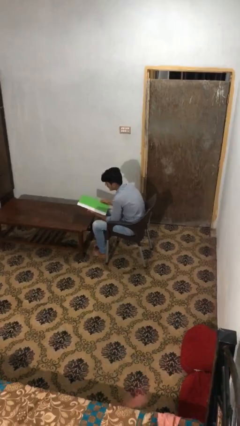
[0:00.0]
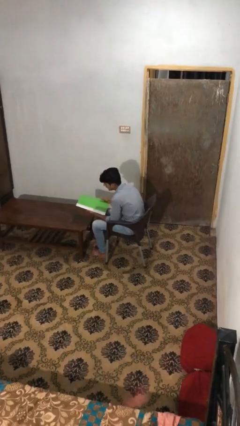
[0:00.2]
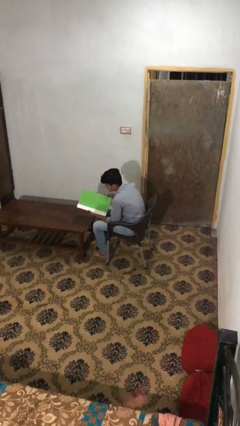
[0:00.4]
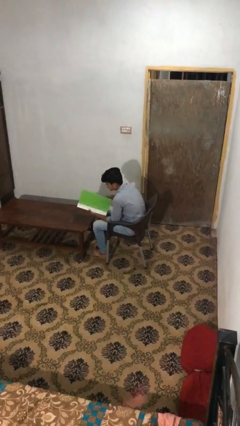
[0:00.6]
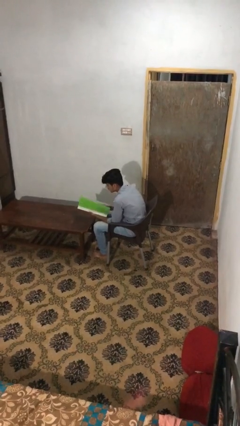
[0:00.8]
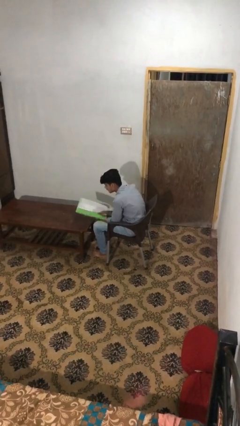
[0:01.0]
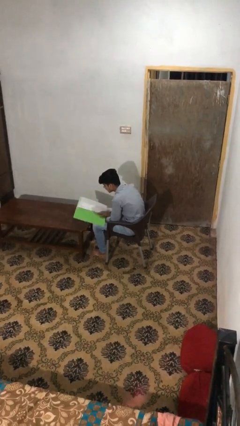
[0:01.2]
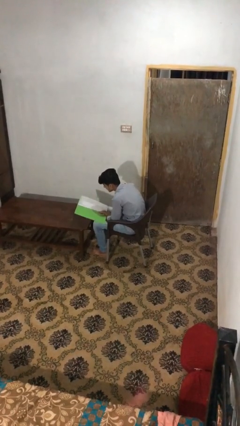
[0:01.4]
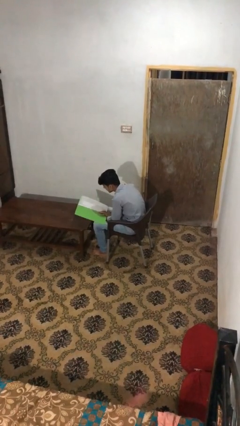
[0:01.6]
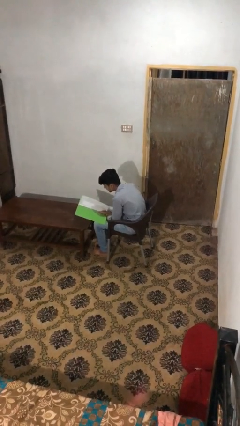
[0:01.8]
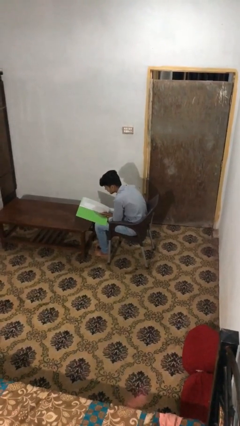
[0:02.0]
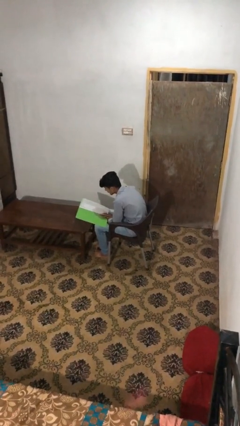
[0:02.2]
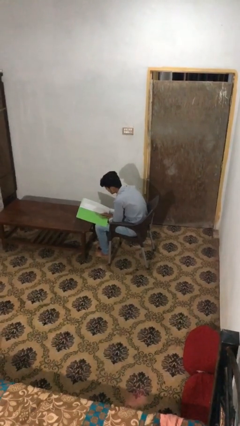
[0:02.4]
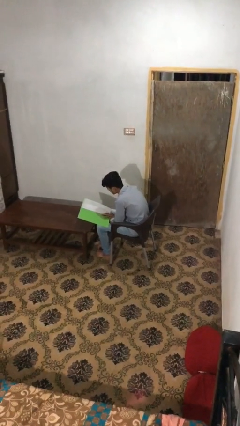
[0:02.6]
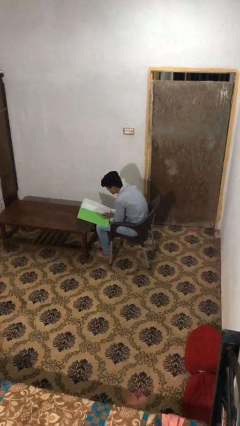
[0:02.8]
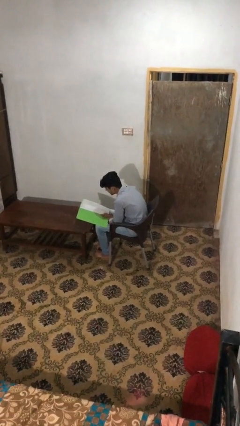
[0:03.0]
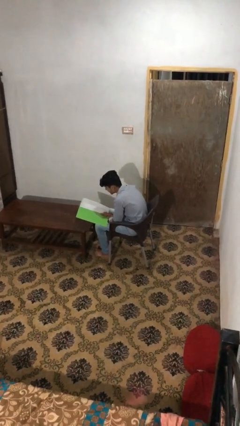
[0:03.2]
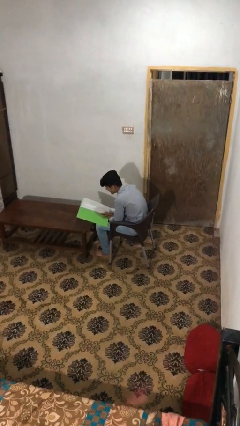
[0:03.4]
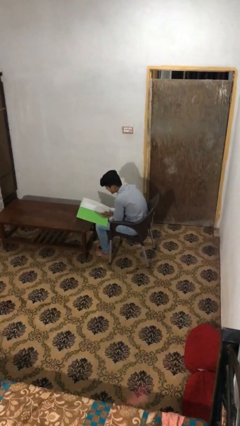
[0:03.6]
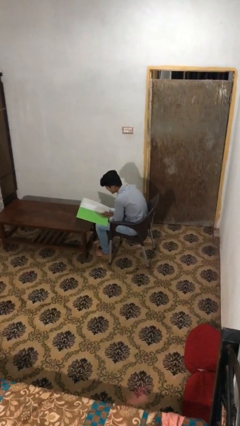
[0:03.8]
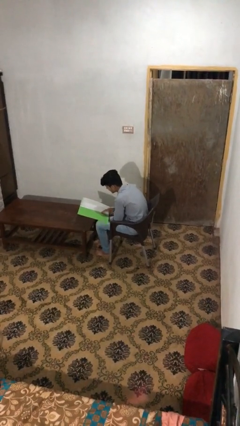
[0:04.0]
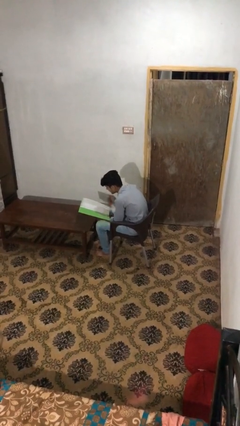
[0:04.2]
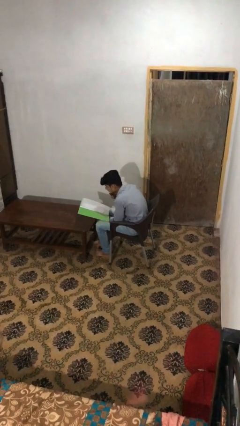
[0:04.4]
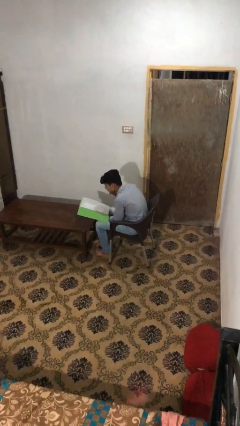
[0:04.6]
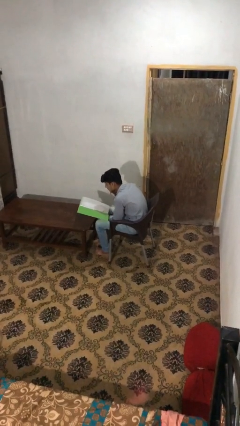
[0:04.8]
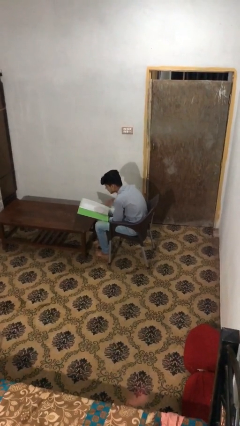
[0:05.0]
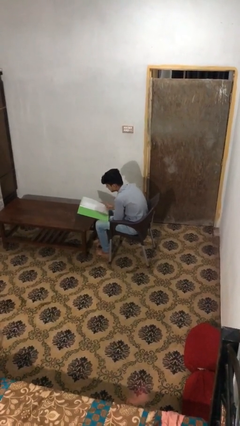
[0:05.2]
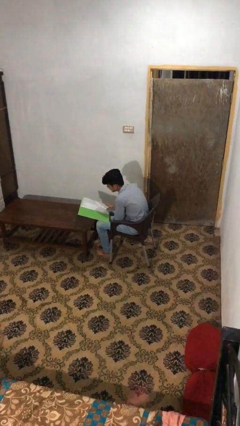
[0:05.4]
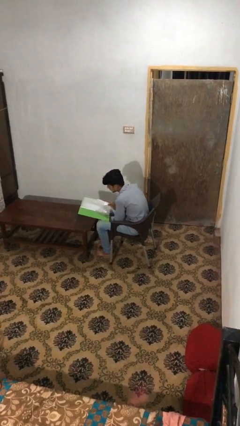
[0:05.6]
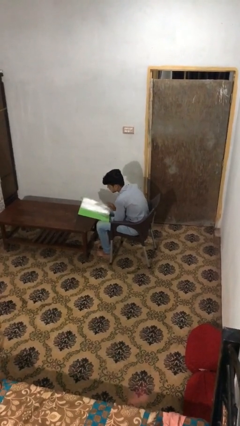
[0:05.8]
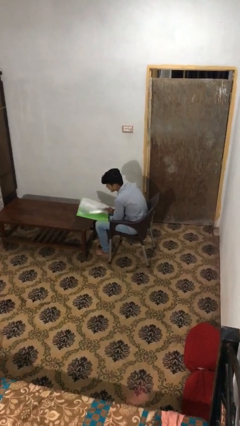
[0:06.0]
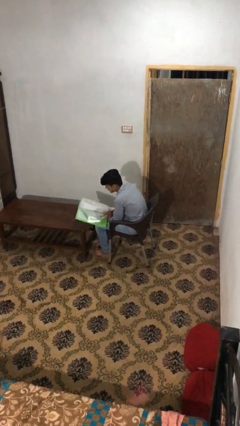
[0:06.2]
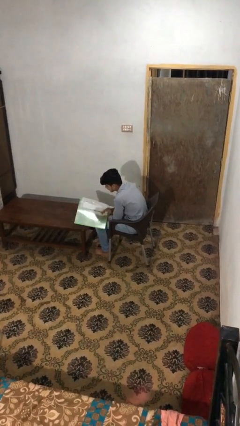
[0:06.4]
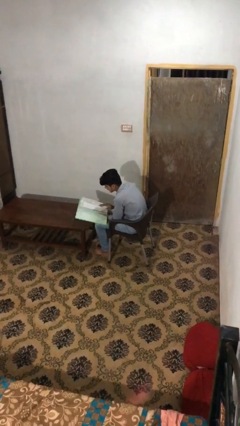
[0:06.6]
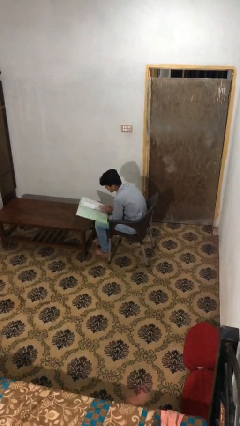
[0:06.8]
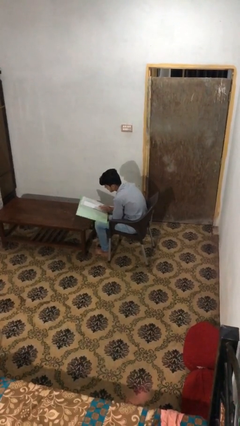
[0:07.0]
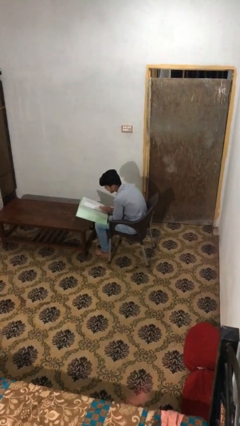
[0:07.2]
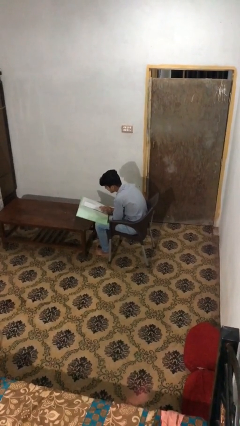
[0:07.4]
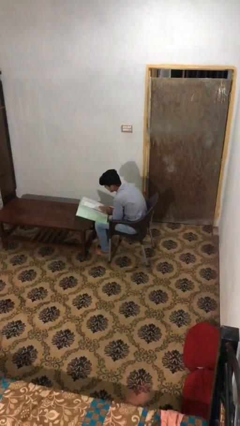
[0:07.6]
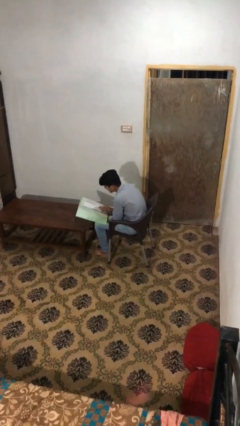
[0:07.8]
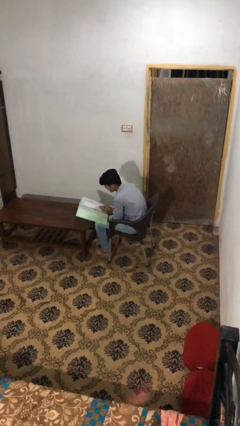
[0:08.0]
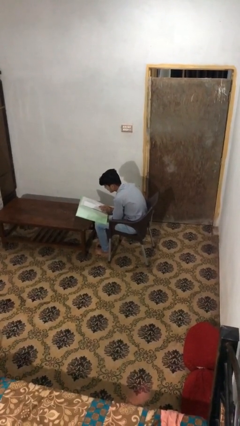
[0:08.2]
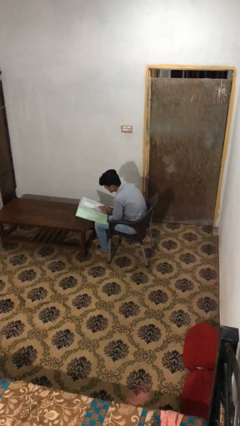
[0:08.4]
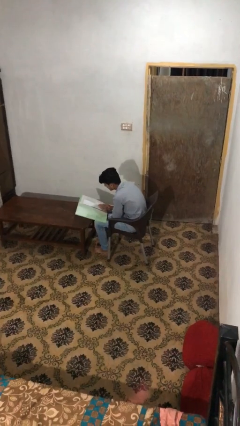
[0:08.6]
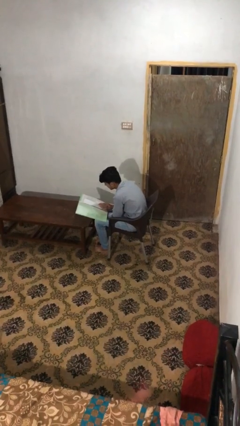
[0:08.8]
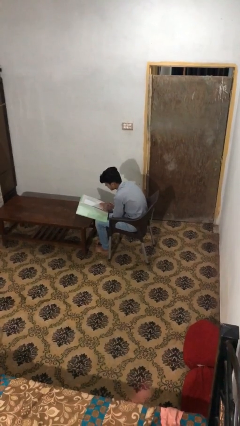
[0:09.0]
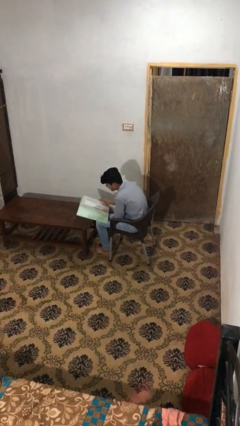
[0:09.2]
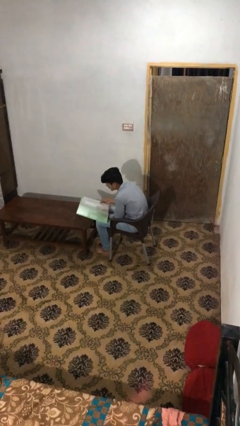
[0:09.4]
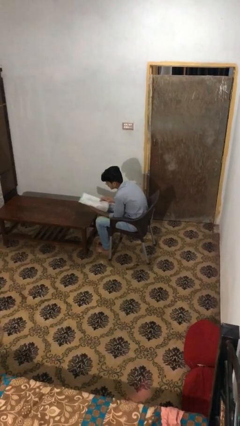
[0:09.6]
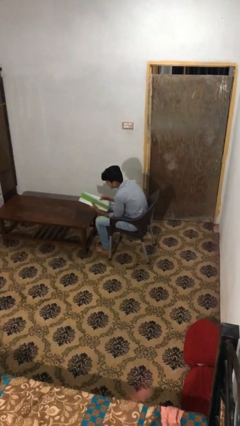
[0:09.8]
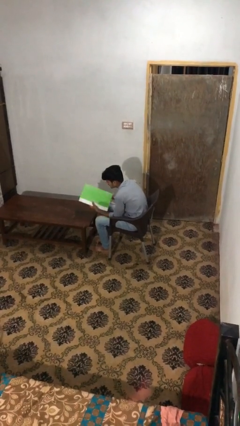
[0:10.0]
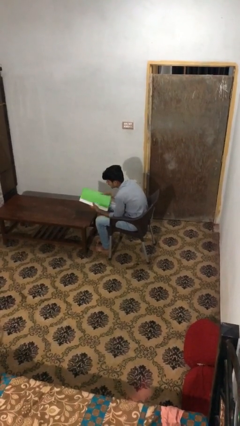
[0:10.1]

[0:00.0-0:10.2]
person reads document

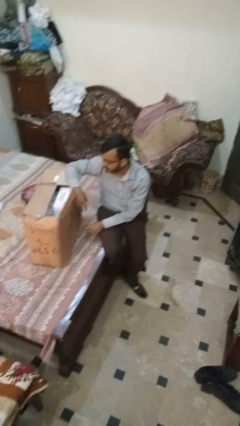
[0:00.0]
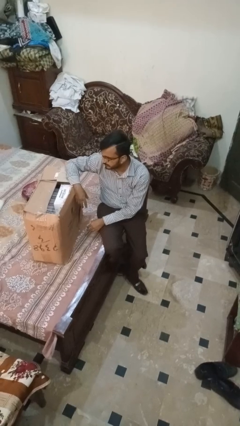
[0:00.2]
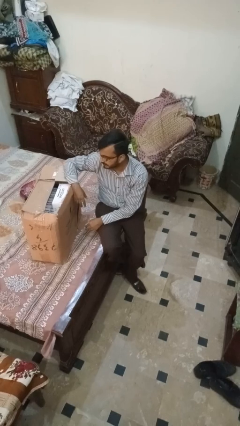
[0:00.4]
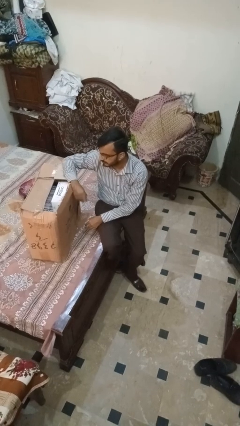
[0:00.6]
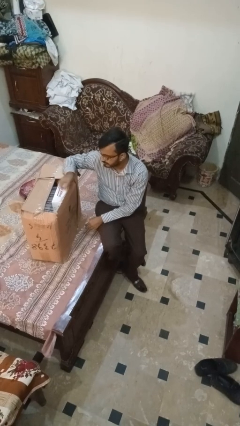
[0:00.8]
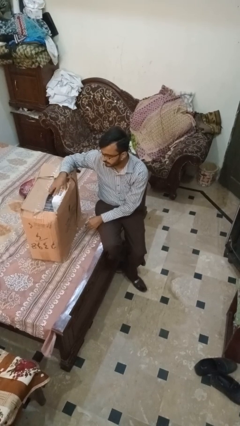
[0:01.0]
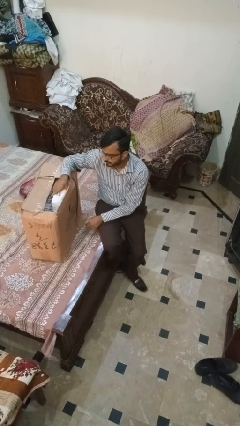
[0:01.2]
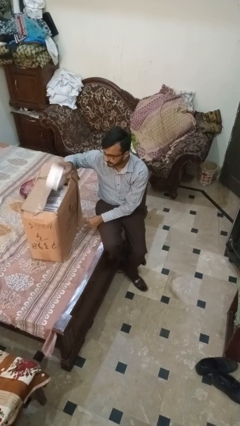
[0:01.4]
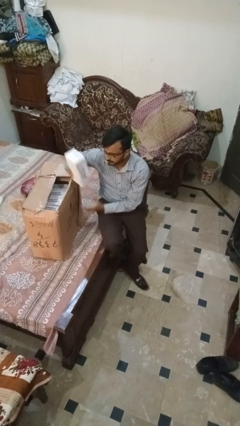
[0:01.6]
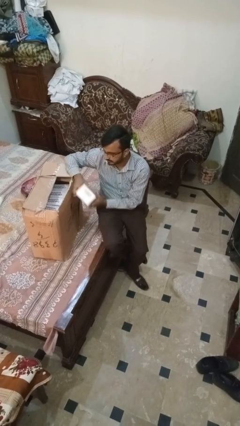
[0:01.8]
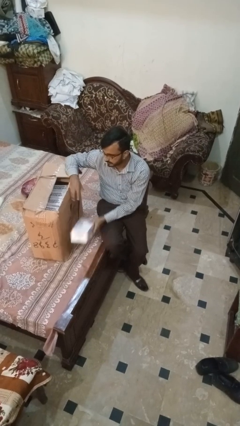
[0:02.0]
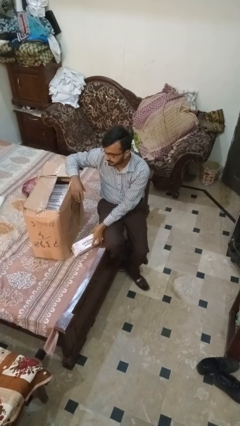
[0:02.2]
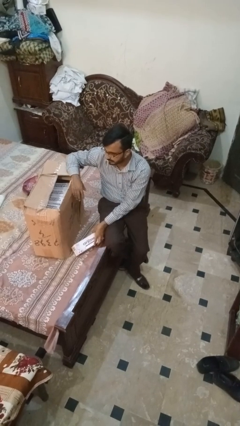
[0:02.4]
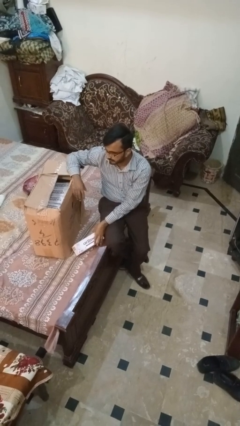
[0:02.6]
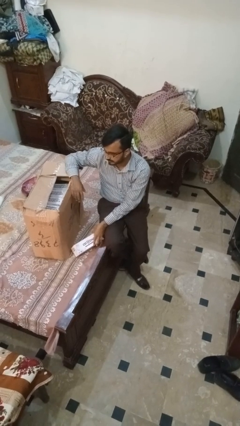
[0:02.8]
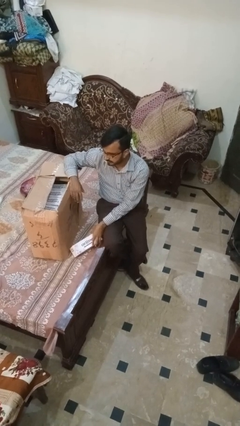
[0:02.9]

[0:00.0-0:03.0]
person takes object from box

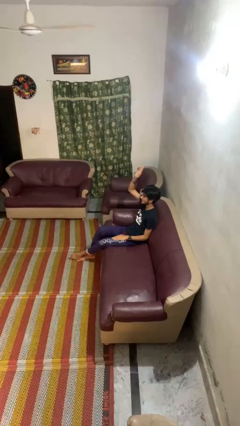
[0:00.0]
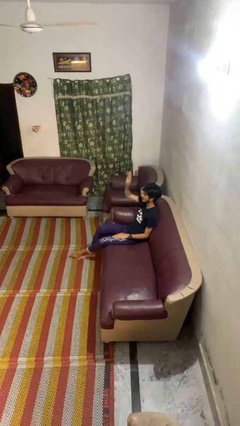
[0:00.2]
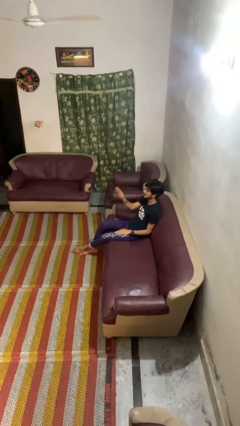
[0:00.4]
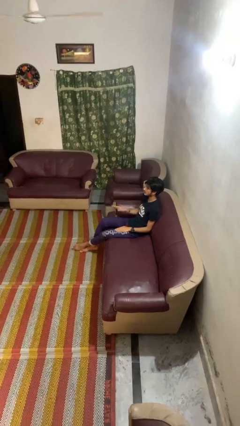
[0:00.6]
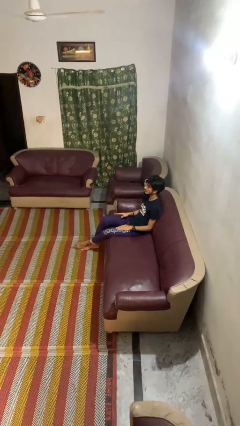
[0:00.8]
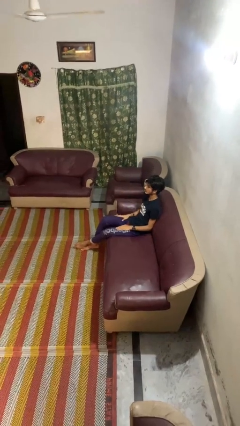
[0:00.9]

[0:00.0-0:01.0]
person gestures lower hand

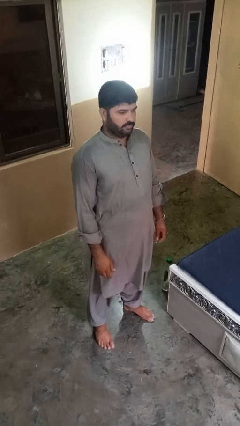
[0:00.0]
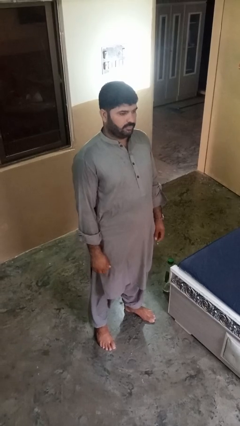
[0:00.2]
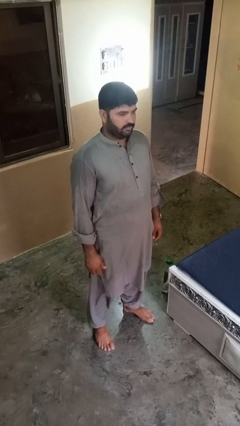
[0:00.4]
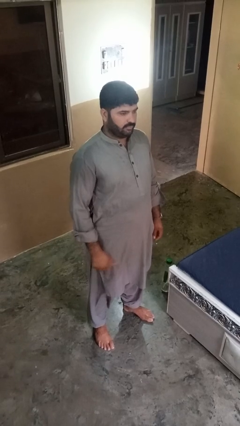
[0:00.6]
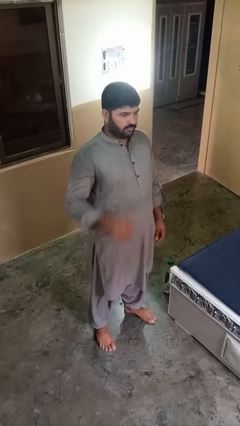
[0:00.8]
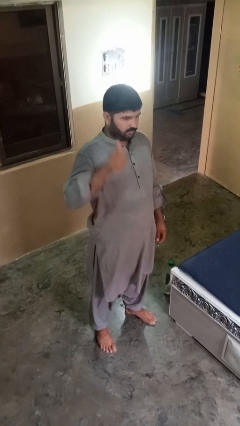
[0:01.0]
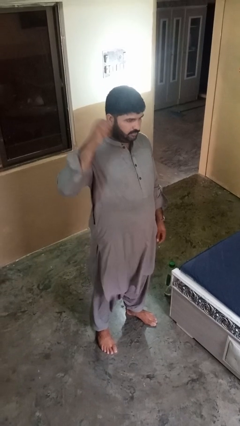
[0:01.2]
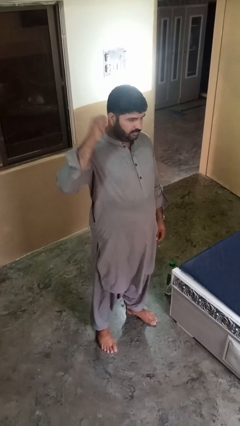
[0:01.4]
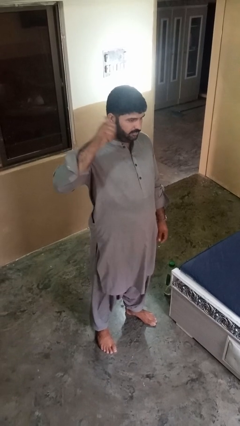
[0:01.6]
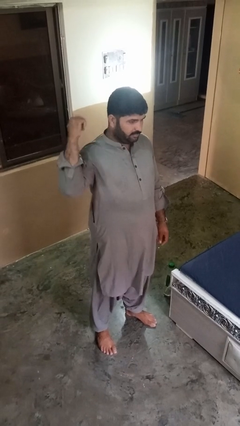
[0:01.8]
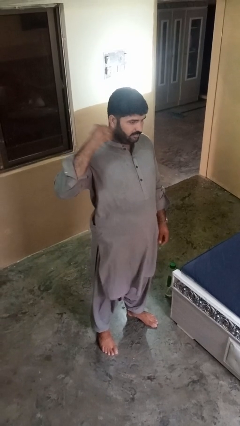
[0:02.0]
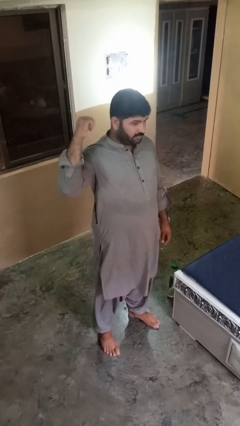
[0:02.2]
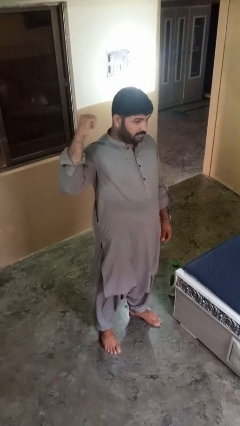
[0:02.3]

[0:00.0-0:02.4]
person gestures behind me

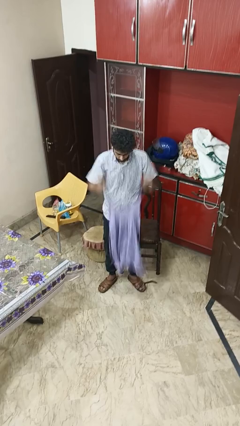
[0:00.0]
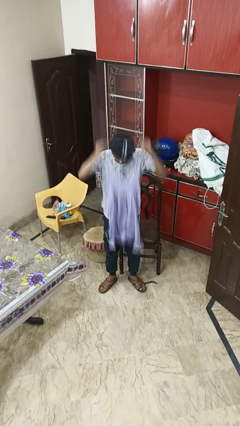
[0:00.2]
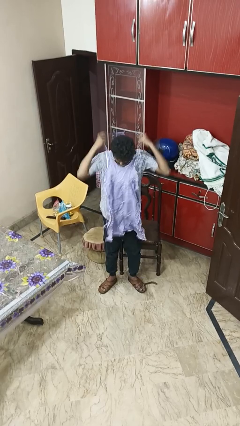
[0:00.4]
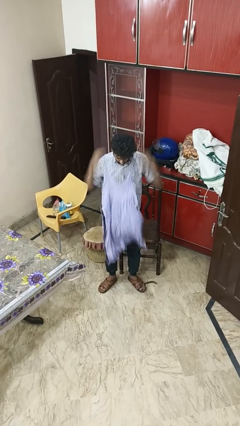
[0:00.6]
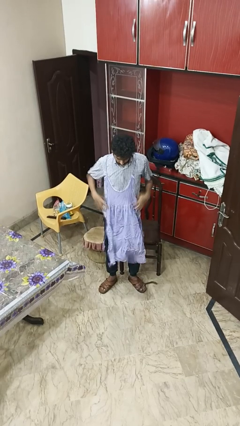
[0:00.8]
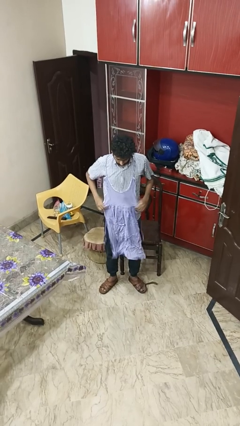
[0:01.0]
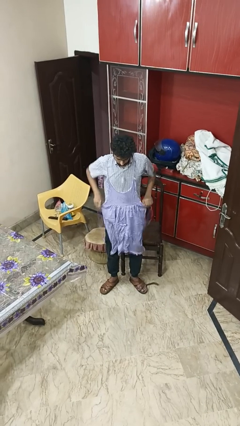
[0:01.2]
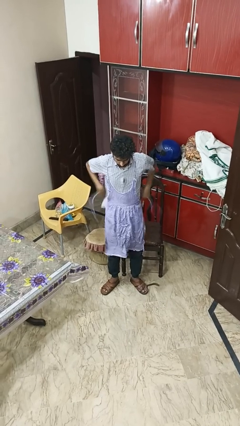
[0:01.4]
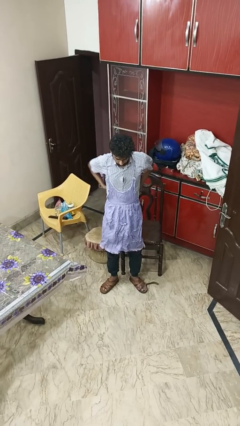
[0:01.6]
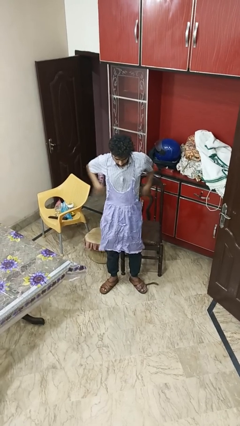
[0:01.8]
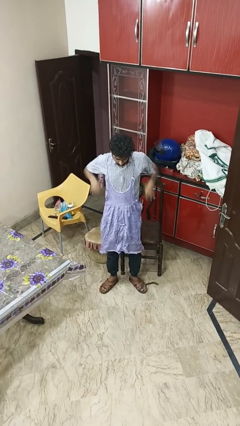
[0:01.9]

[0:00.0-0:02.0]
person puts on apron
